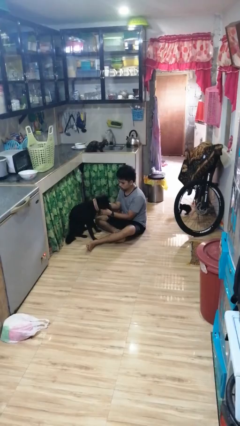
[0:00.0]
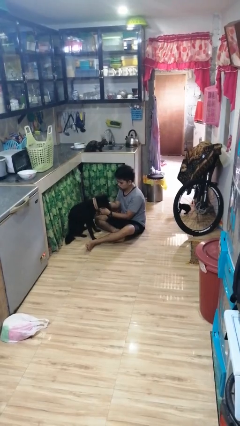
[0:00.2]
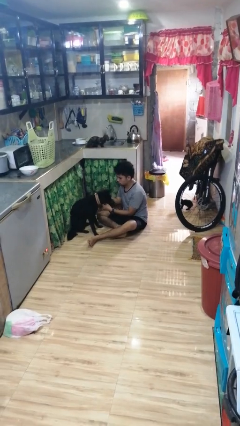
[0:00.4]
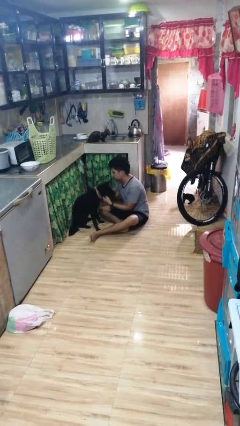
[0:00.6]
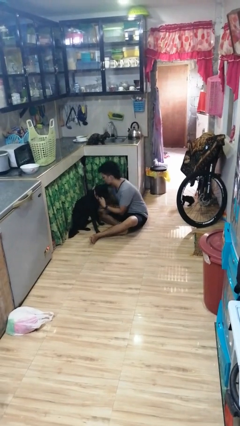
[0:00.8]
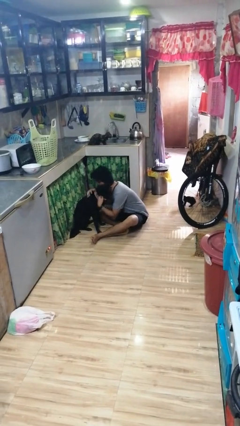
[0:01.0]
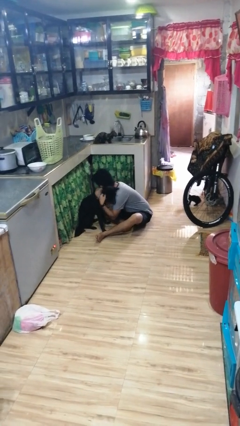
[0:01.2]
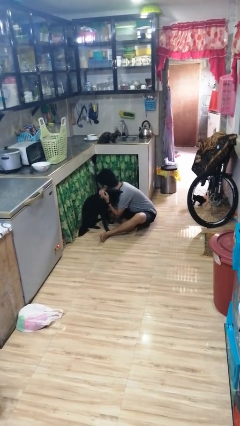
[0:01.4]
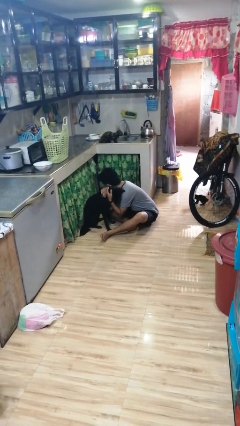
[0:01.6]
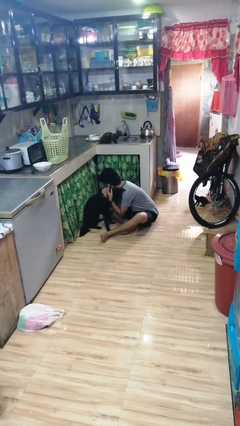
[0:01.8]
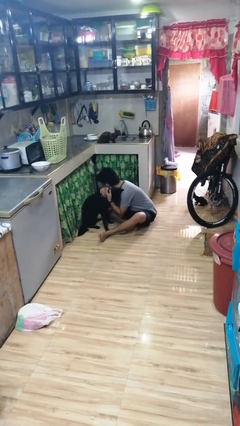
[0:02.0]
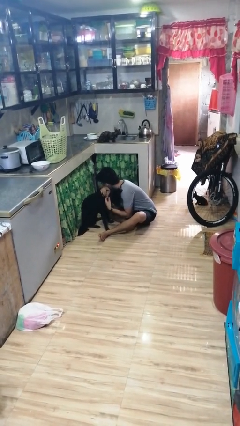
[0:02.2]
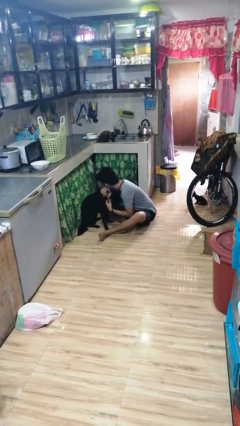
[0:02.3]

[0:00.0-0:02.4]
person hugs dog

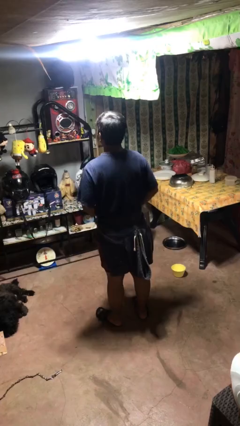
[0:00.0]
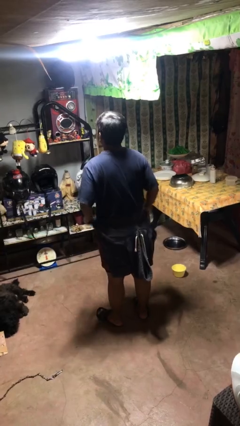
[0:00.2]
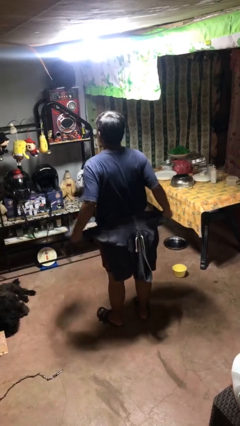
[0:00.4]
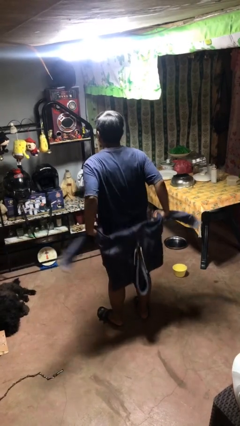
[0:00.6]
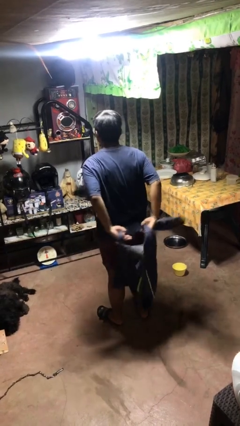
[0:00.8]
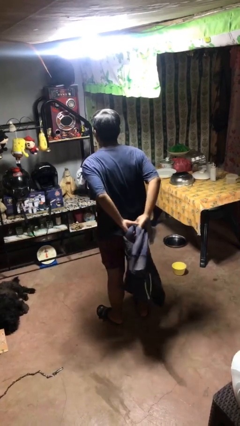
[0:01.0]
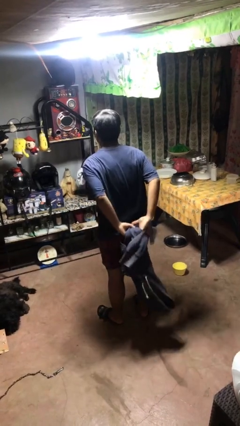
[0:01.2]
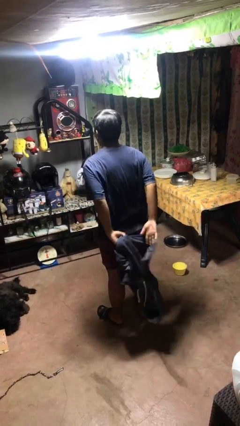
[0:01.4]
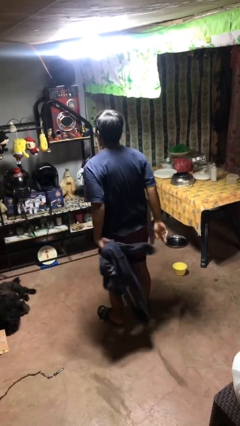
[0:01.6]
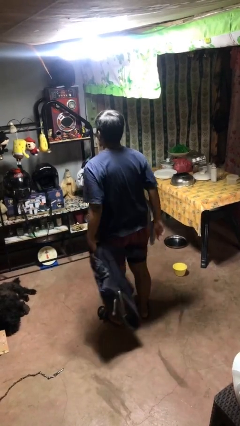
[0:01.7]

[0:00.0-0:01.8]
person unties jacket around waist

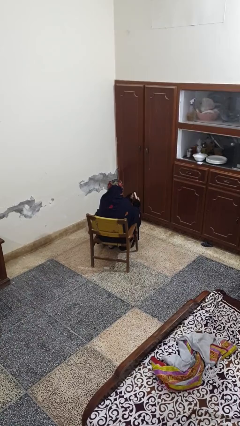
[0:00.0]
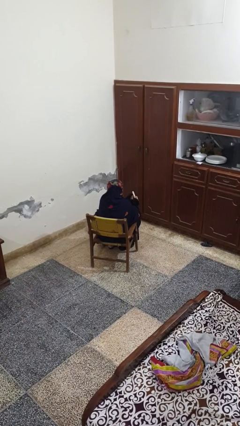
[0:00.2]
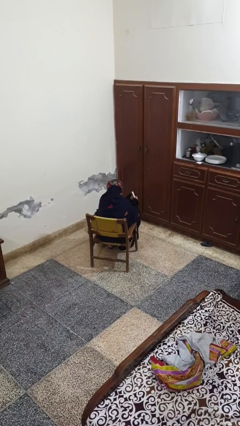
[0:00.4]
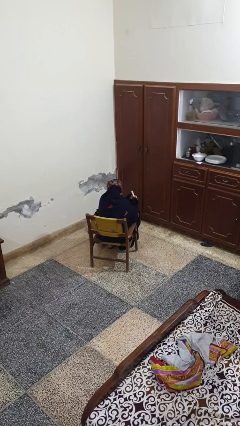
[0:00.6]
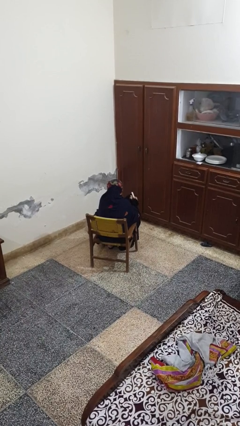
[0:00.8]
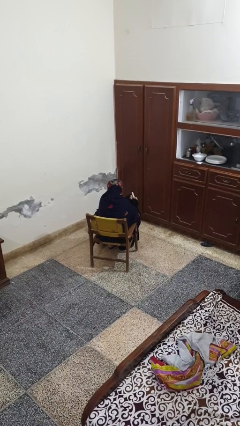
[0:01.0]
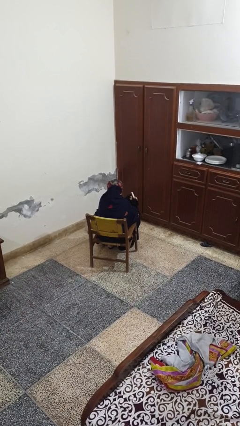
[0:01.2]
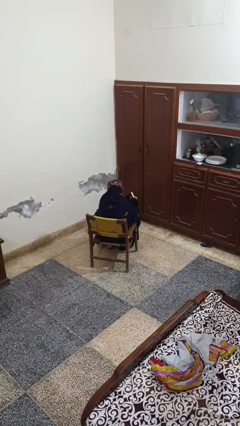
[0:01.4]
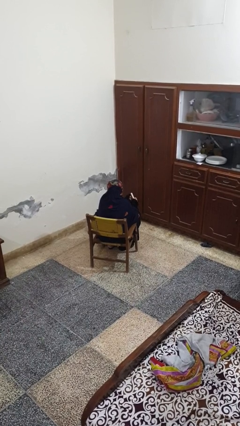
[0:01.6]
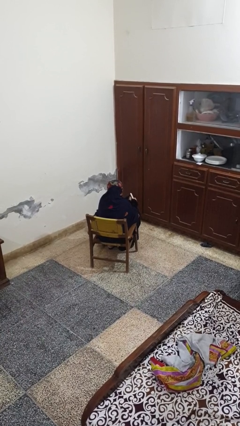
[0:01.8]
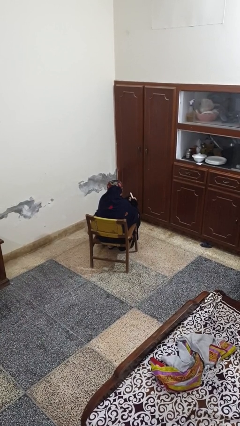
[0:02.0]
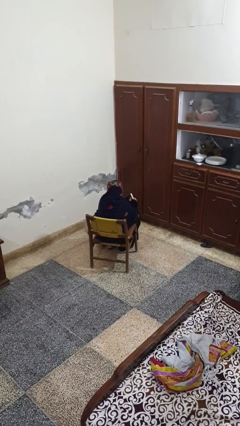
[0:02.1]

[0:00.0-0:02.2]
person files fingernails

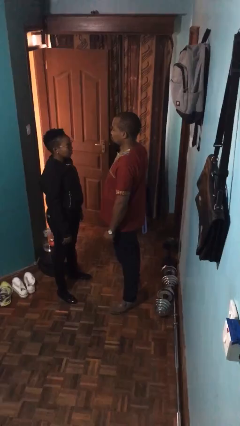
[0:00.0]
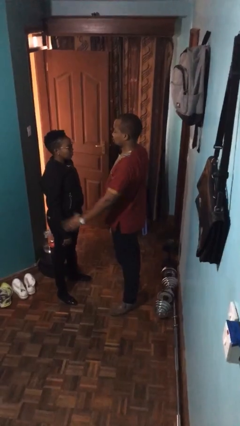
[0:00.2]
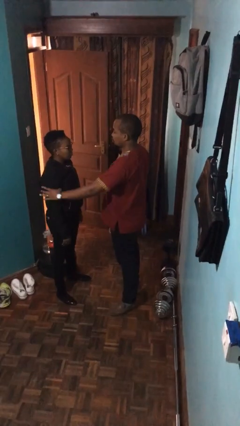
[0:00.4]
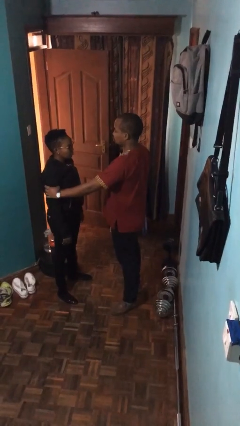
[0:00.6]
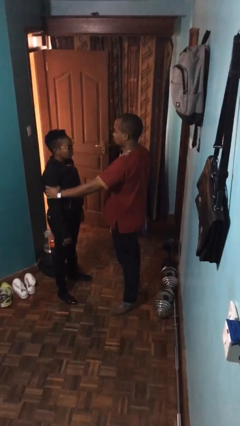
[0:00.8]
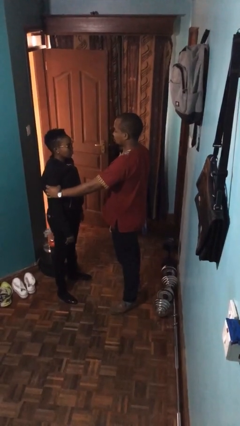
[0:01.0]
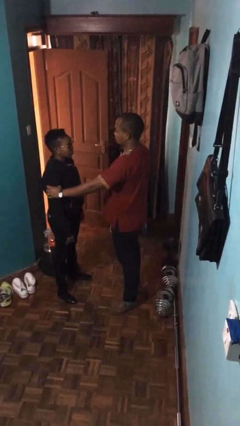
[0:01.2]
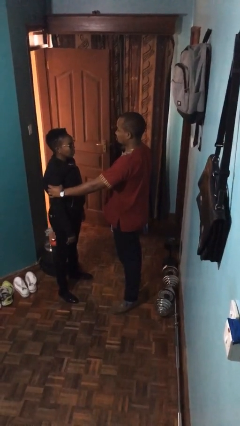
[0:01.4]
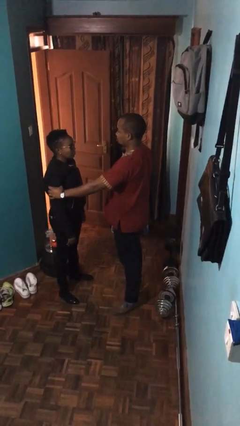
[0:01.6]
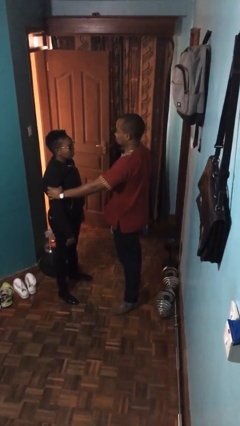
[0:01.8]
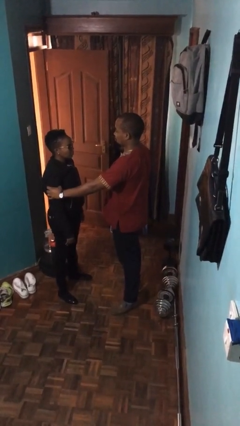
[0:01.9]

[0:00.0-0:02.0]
person grabs person by bicep

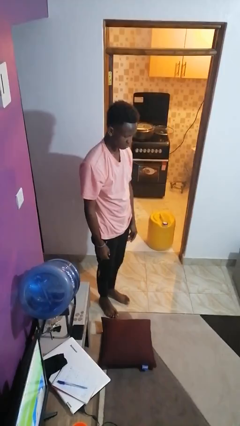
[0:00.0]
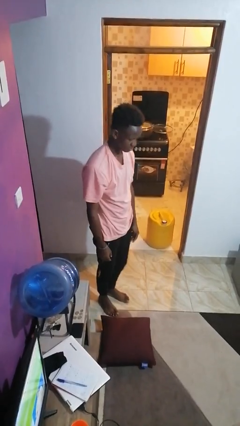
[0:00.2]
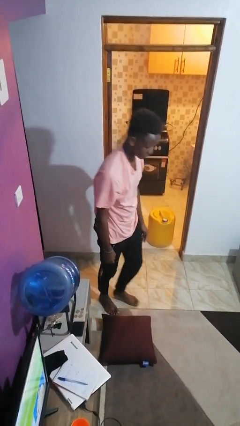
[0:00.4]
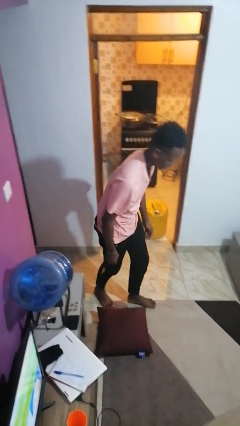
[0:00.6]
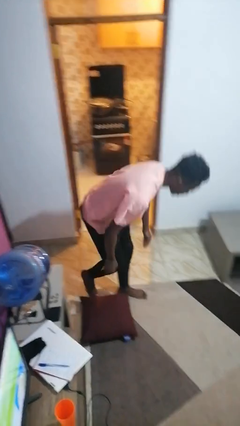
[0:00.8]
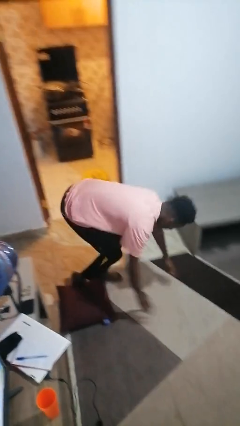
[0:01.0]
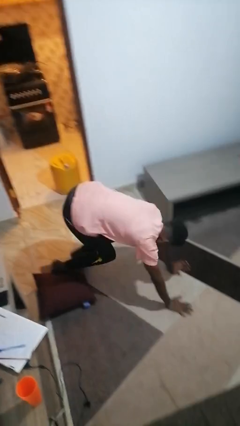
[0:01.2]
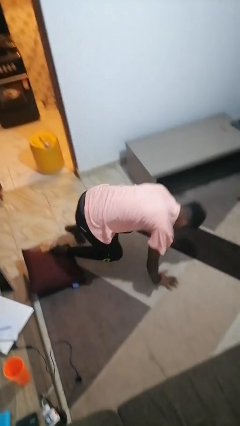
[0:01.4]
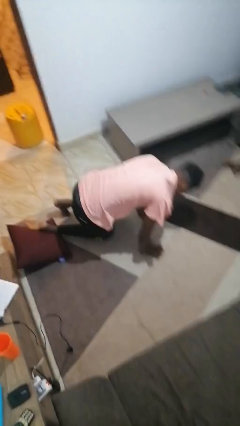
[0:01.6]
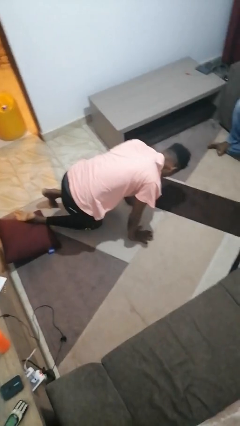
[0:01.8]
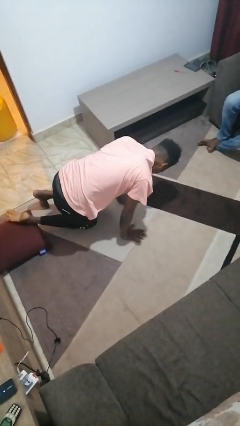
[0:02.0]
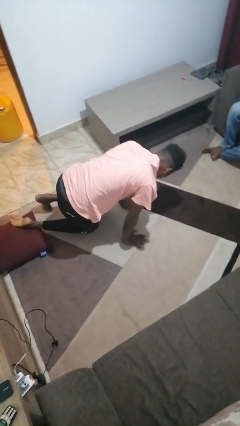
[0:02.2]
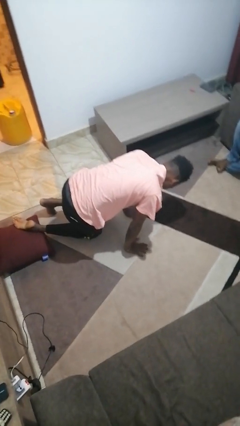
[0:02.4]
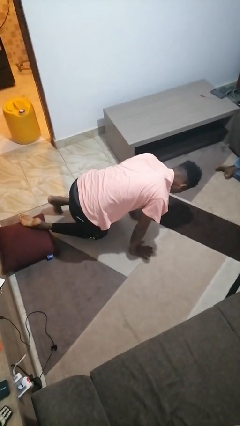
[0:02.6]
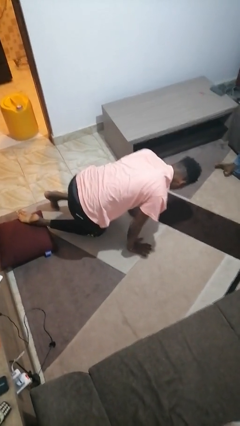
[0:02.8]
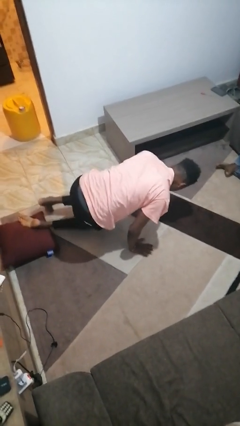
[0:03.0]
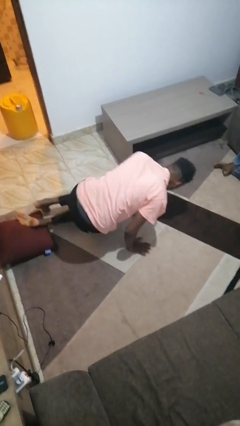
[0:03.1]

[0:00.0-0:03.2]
person trips on object on floor

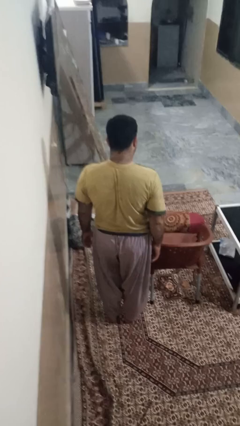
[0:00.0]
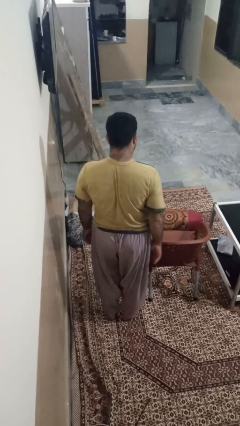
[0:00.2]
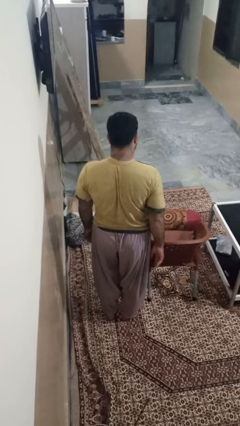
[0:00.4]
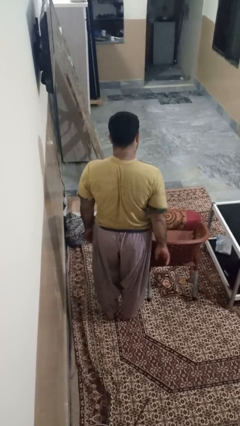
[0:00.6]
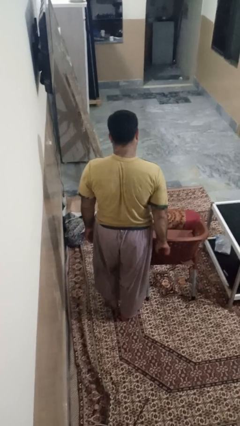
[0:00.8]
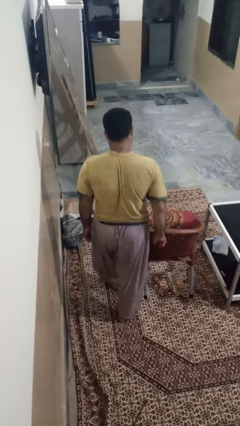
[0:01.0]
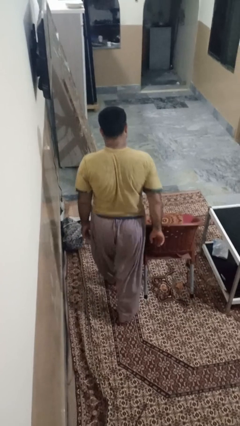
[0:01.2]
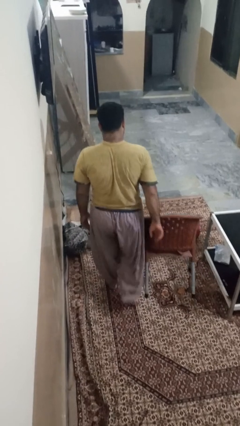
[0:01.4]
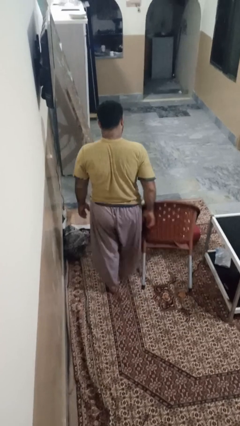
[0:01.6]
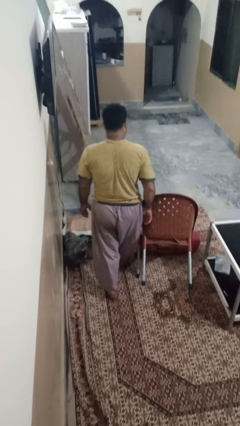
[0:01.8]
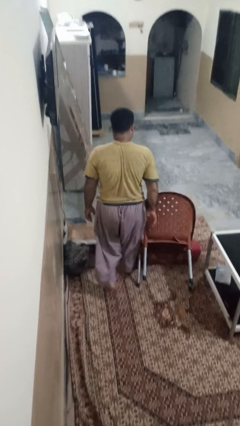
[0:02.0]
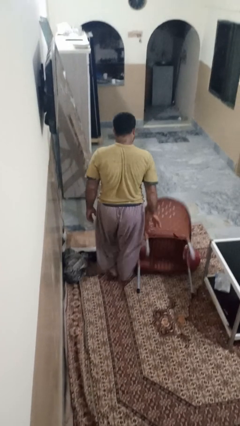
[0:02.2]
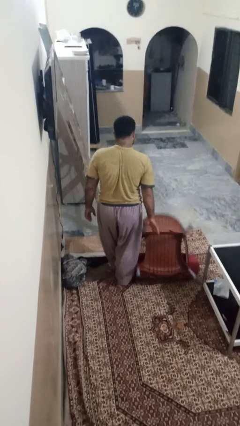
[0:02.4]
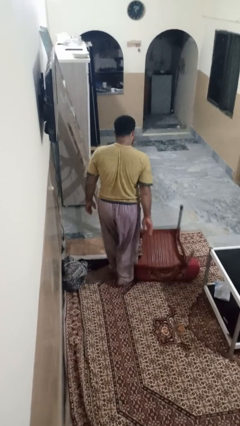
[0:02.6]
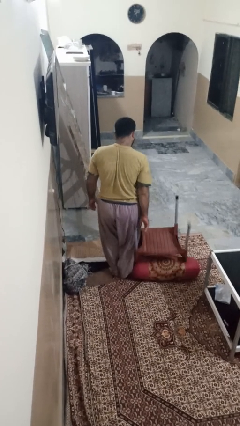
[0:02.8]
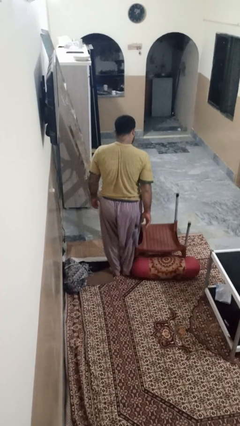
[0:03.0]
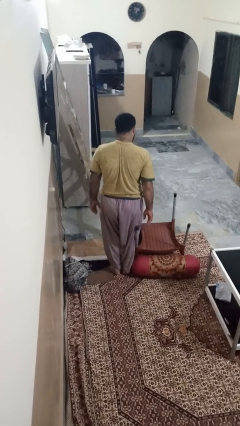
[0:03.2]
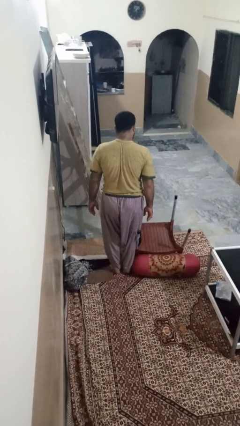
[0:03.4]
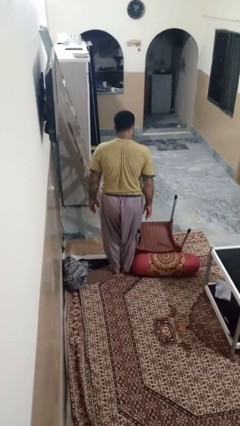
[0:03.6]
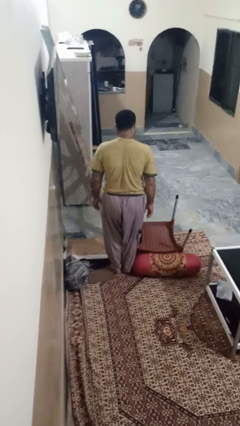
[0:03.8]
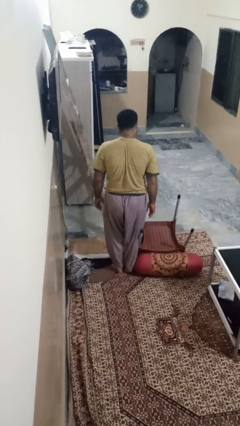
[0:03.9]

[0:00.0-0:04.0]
person knocks over furniture

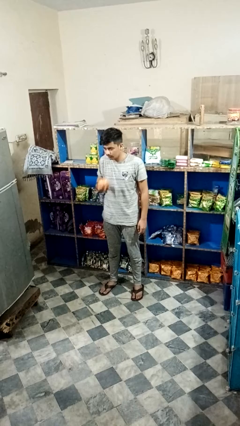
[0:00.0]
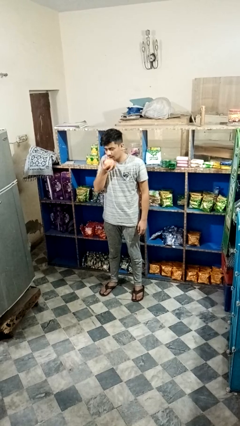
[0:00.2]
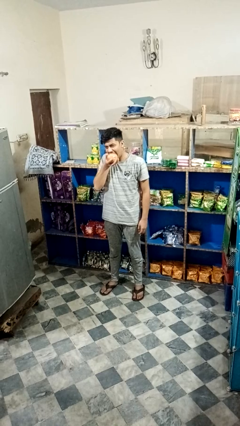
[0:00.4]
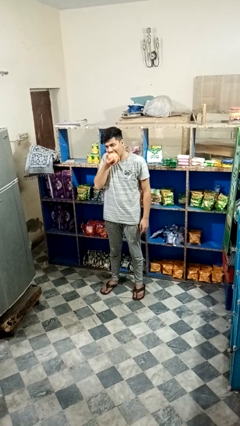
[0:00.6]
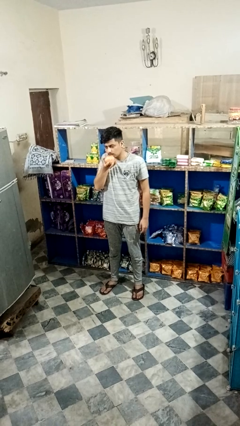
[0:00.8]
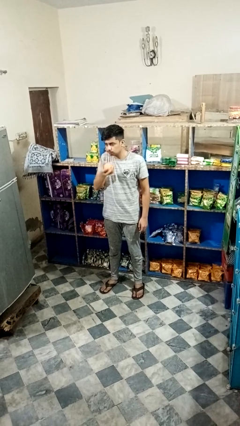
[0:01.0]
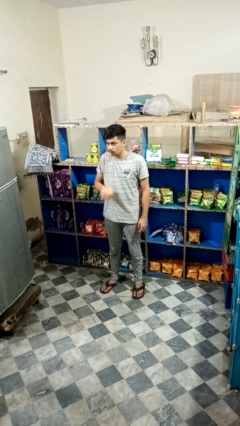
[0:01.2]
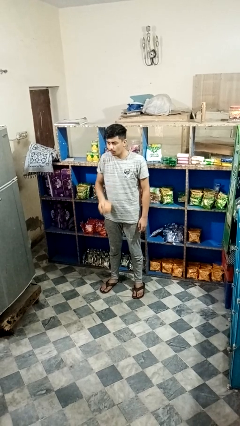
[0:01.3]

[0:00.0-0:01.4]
person eats apple

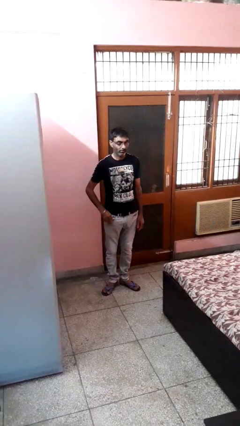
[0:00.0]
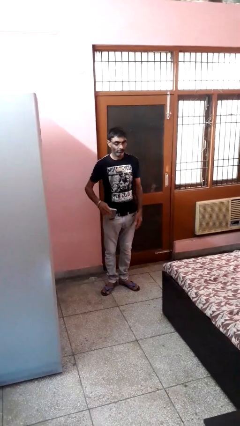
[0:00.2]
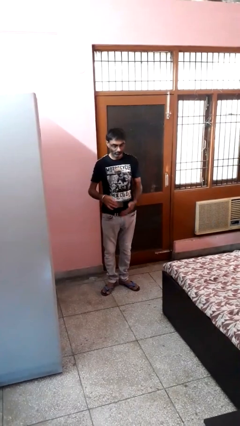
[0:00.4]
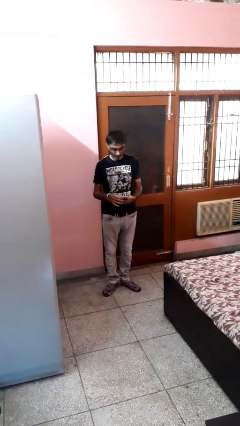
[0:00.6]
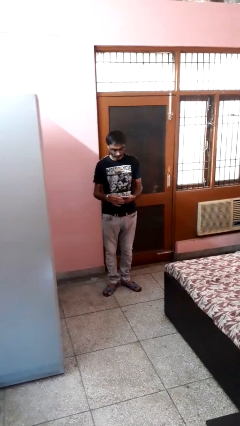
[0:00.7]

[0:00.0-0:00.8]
person takes phone from pocket
